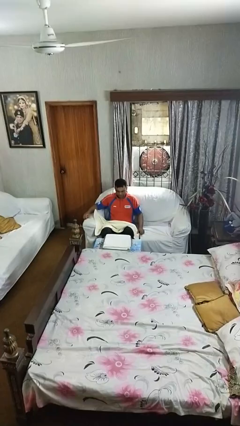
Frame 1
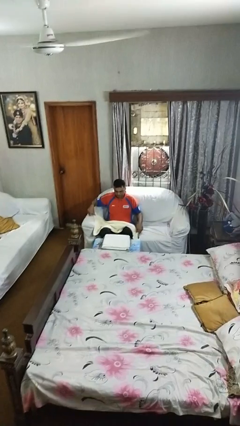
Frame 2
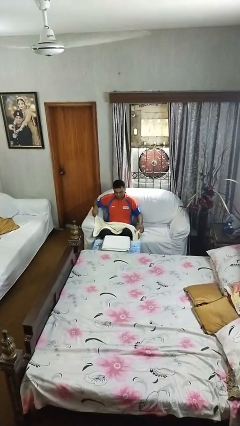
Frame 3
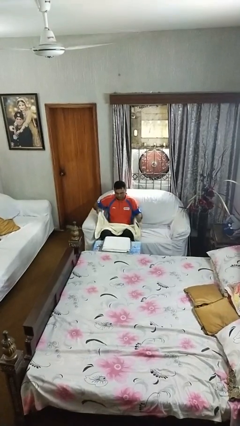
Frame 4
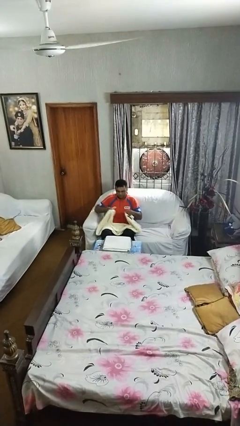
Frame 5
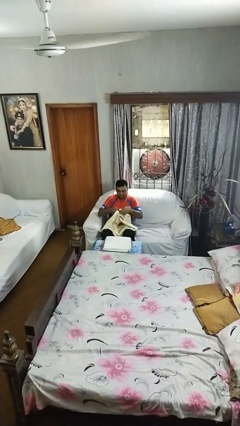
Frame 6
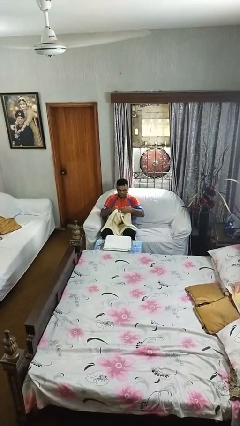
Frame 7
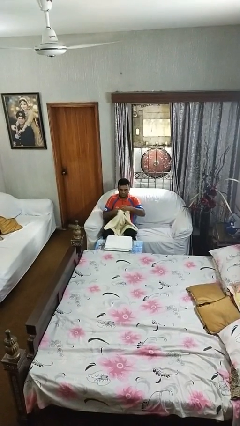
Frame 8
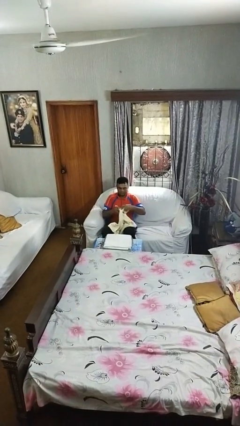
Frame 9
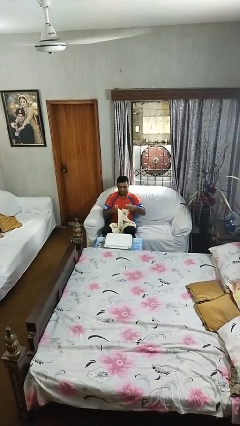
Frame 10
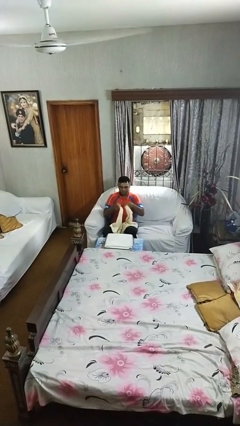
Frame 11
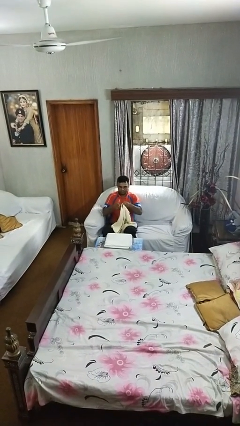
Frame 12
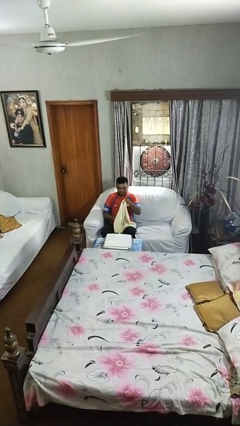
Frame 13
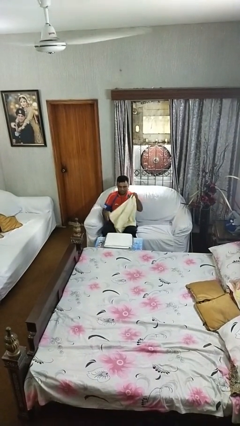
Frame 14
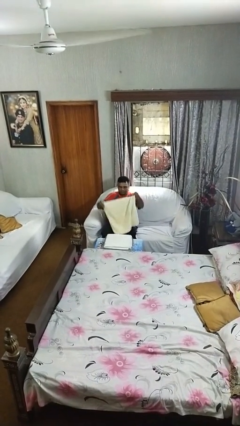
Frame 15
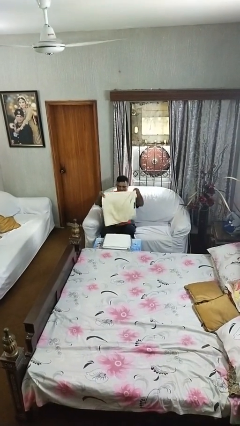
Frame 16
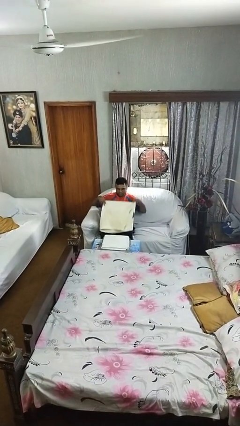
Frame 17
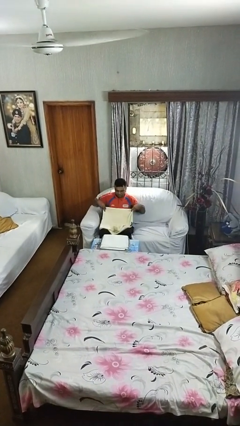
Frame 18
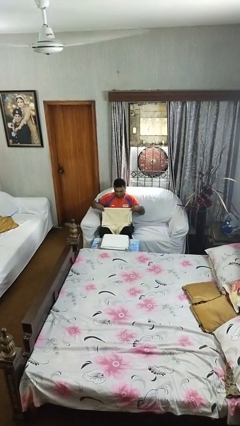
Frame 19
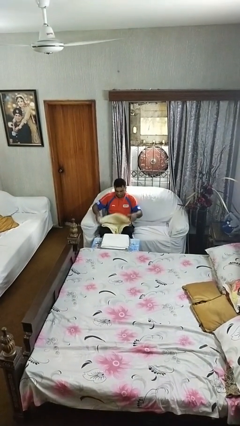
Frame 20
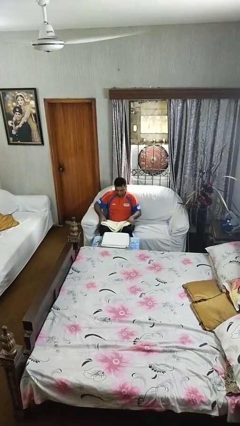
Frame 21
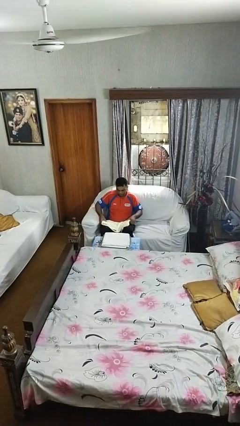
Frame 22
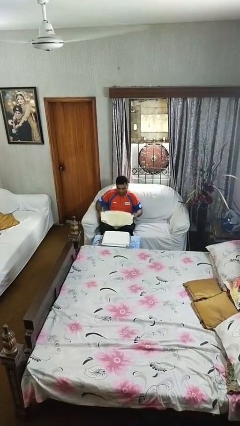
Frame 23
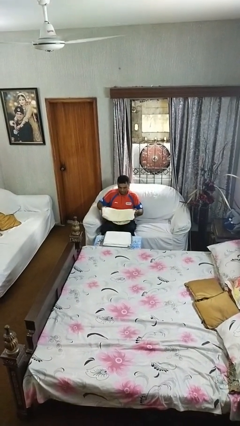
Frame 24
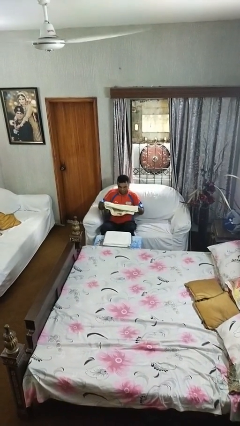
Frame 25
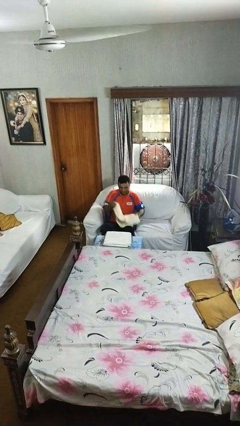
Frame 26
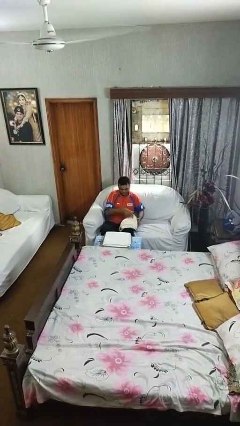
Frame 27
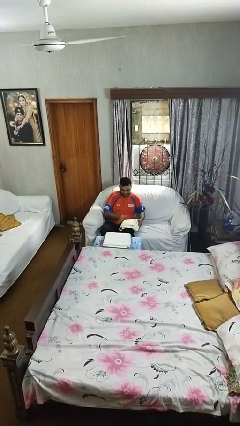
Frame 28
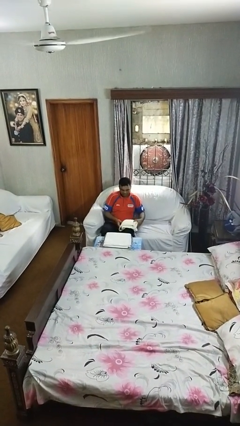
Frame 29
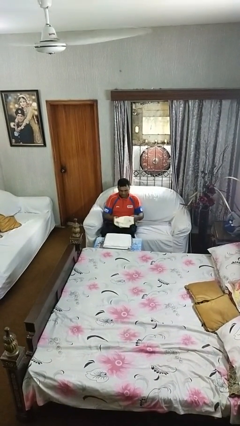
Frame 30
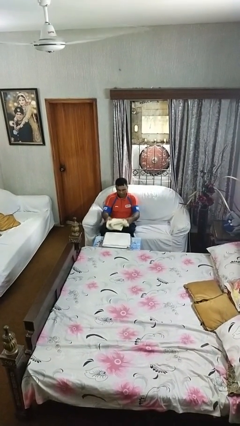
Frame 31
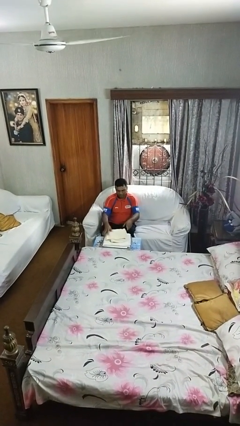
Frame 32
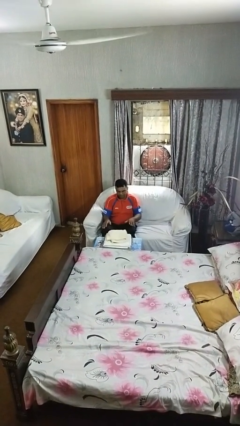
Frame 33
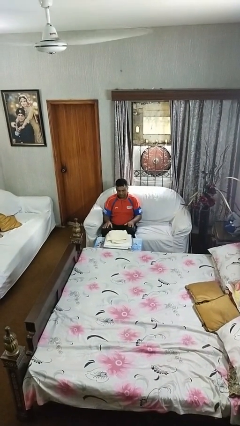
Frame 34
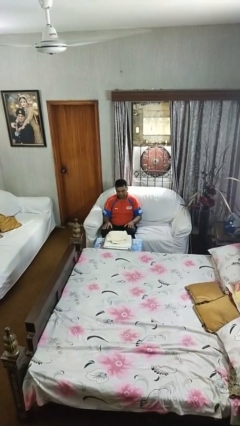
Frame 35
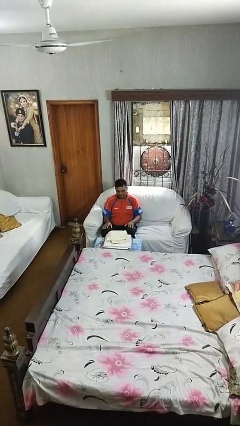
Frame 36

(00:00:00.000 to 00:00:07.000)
person folds towel

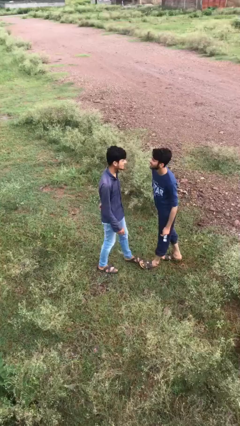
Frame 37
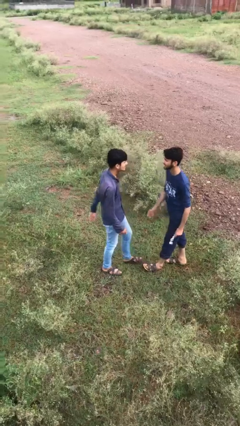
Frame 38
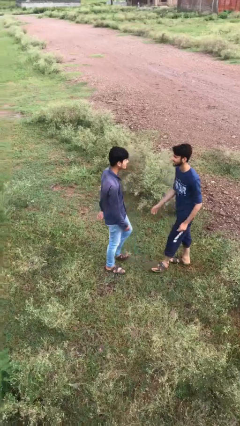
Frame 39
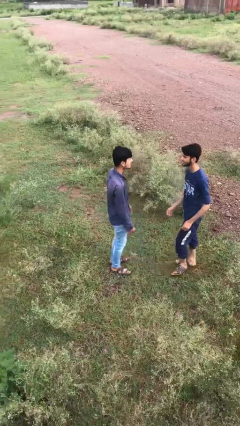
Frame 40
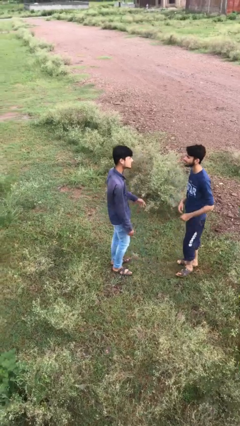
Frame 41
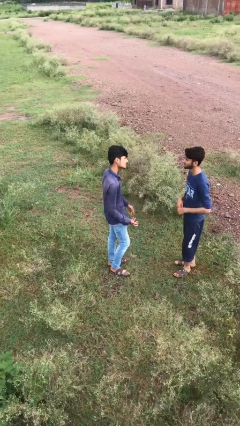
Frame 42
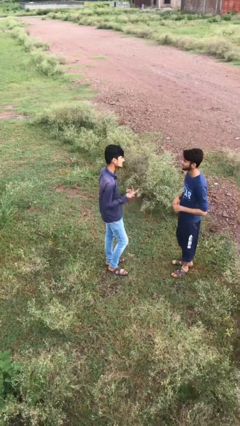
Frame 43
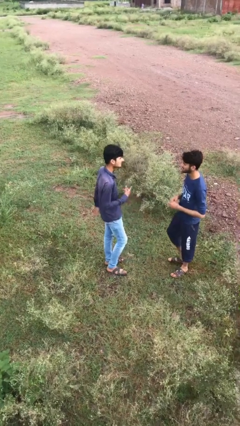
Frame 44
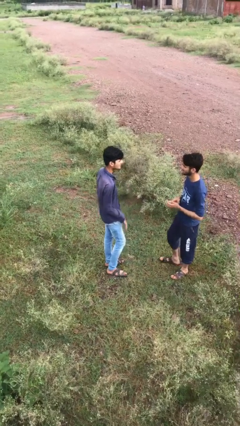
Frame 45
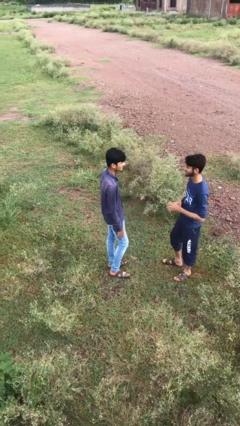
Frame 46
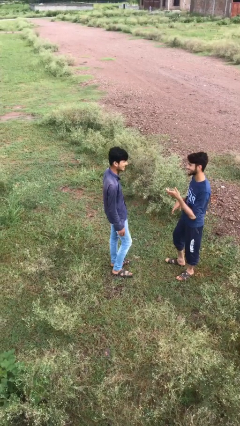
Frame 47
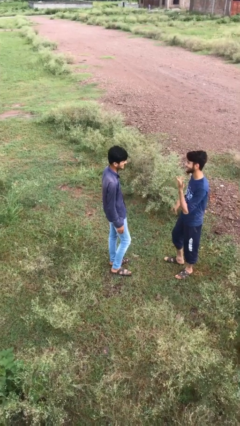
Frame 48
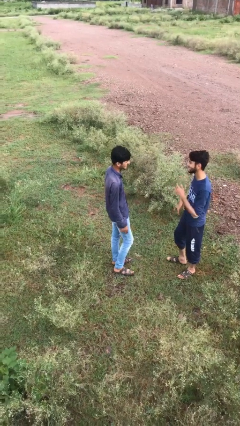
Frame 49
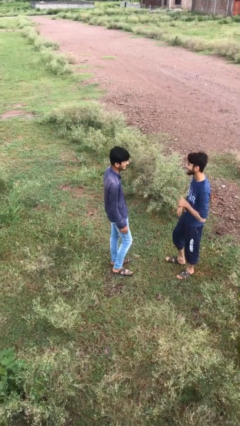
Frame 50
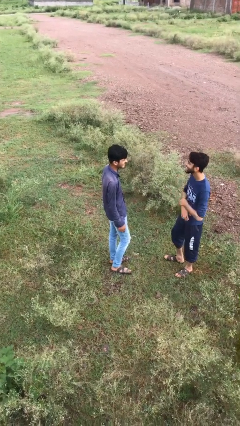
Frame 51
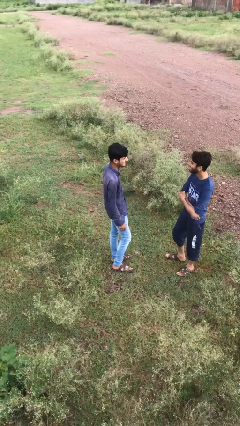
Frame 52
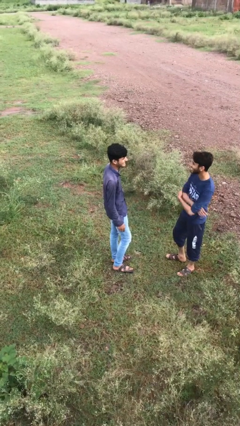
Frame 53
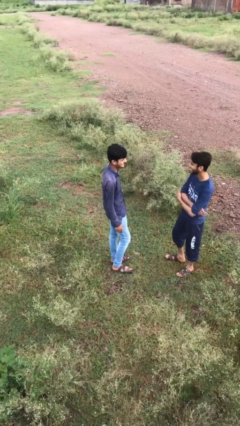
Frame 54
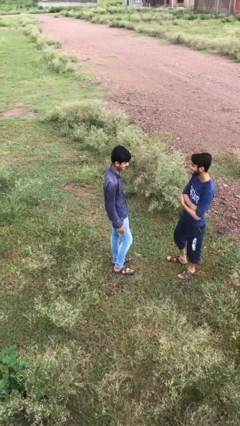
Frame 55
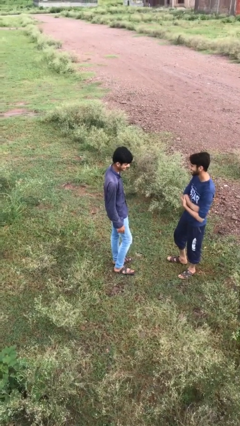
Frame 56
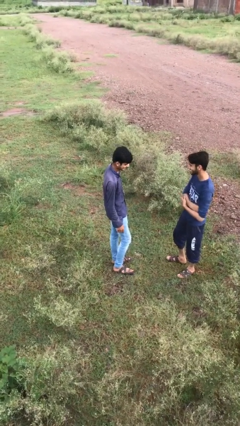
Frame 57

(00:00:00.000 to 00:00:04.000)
person talks to person

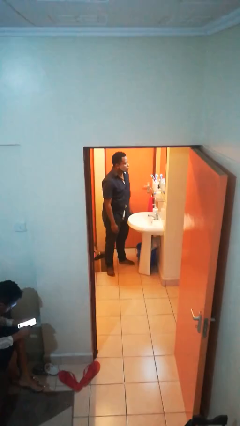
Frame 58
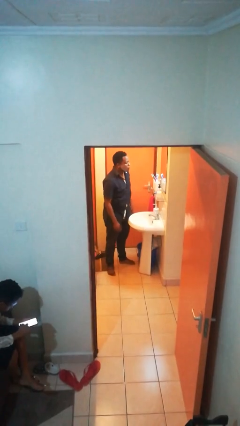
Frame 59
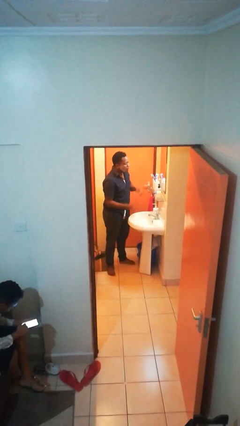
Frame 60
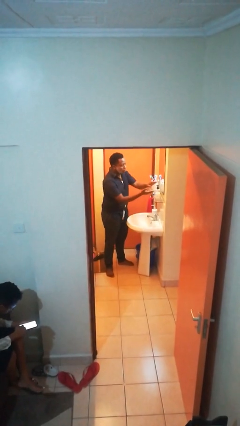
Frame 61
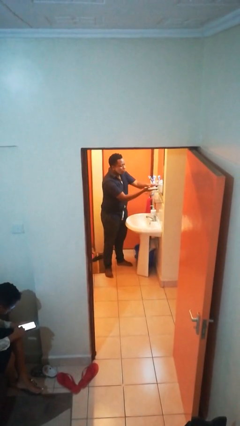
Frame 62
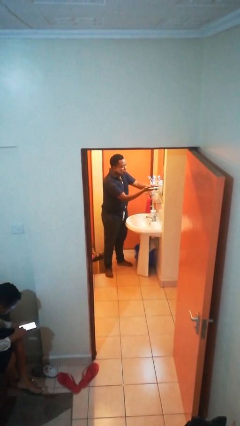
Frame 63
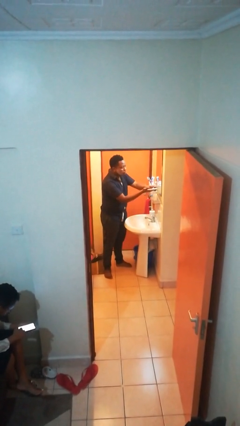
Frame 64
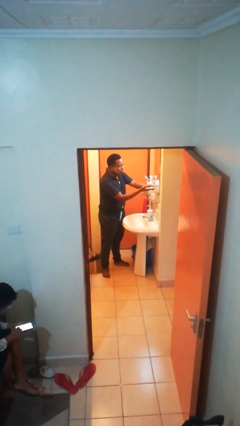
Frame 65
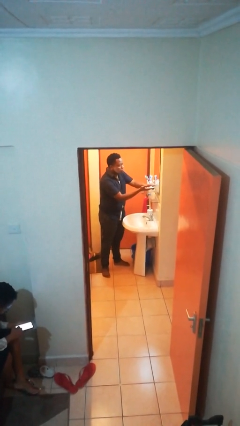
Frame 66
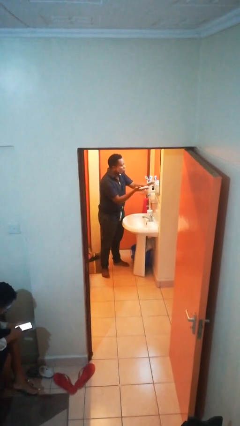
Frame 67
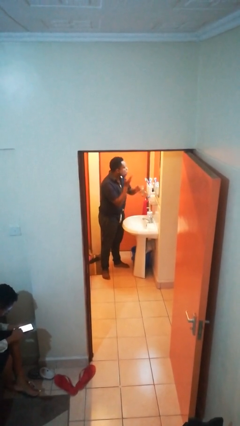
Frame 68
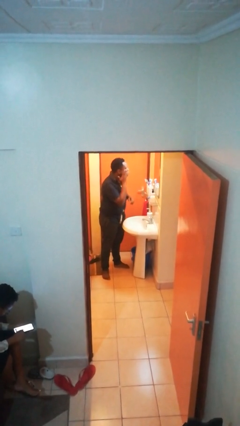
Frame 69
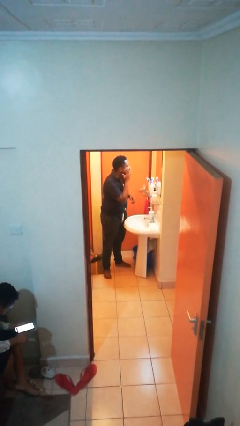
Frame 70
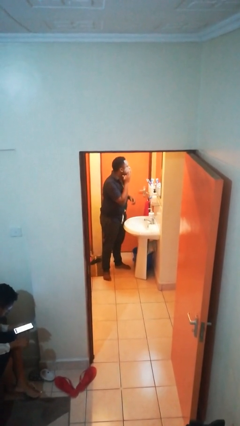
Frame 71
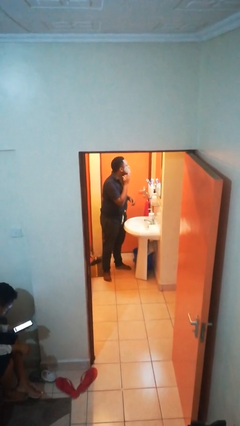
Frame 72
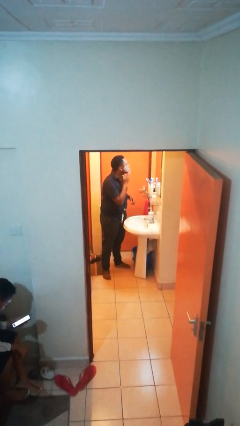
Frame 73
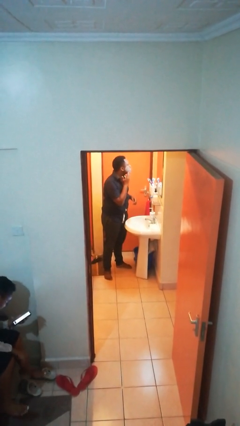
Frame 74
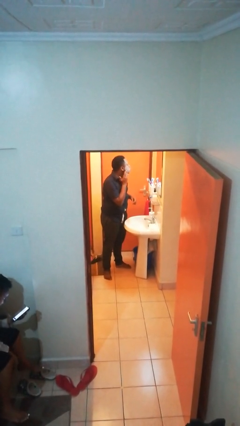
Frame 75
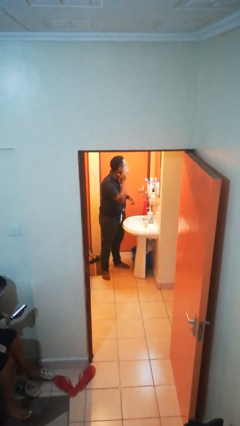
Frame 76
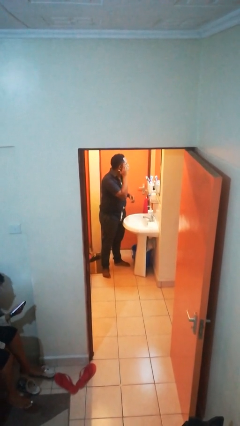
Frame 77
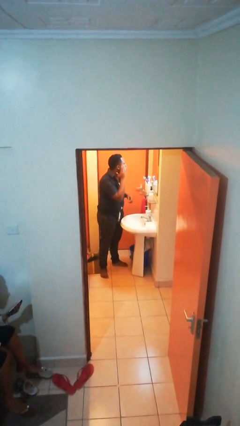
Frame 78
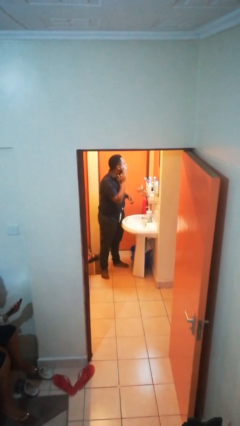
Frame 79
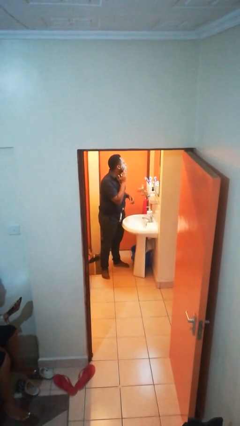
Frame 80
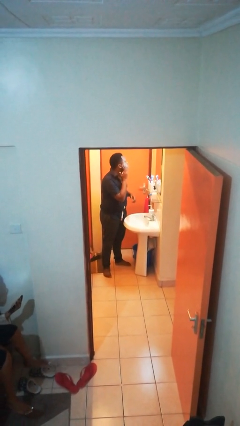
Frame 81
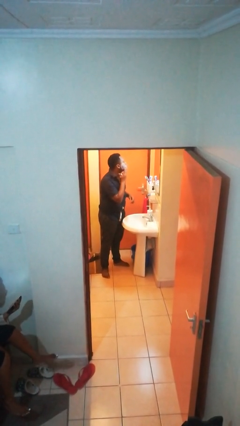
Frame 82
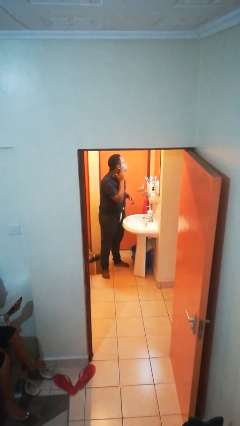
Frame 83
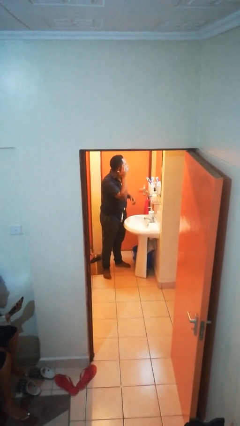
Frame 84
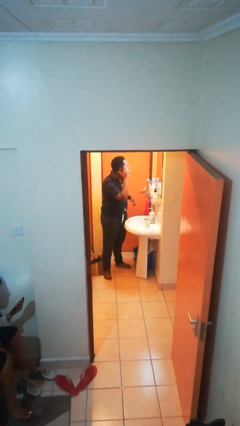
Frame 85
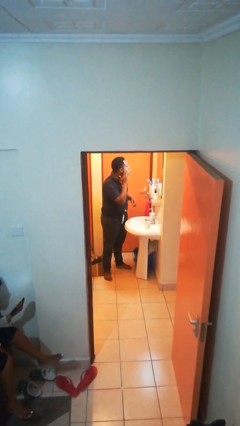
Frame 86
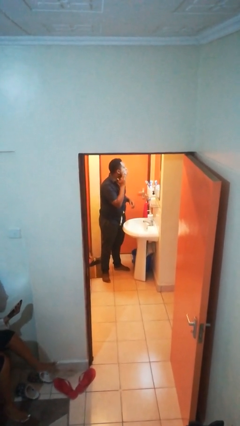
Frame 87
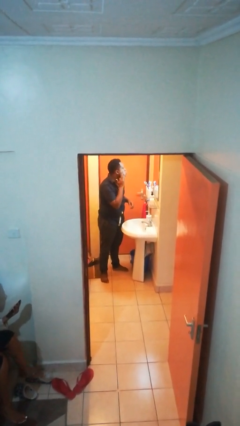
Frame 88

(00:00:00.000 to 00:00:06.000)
person applies shaving cream

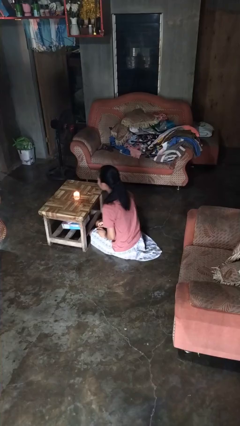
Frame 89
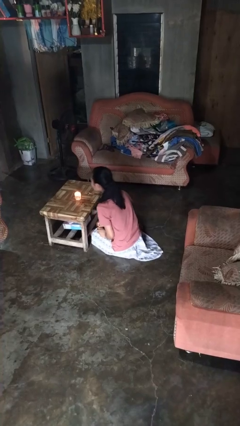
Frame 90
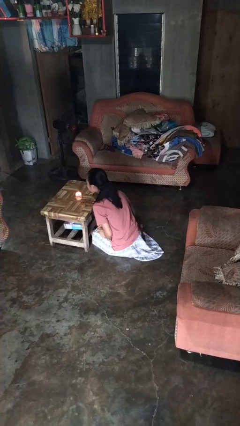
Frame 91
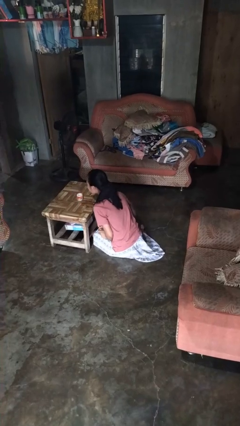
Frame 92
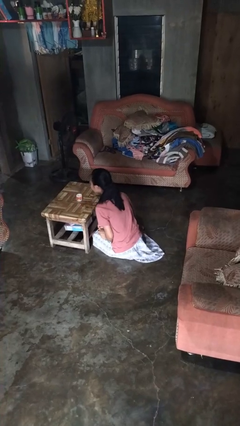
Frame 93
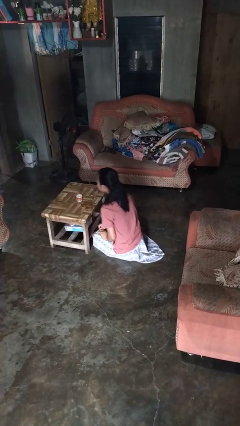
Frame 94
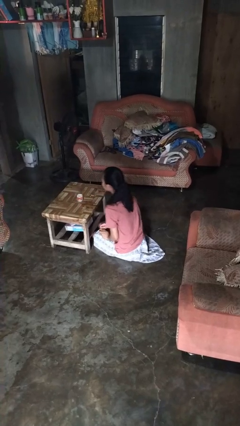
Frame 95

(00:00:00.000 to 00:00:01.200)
person extinguishes candle
